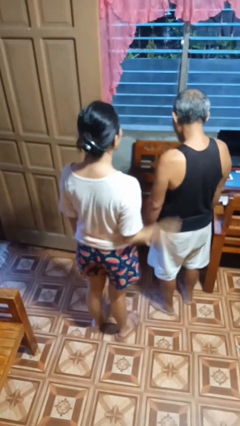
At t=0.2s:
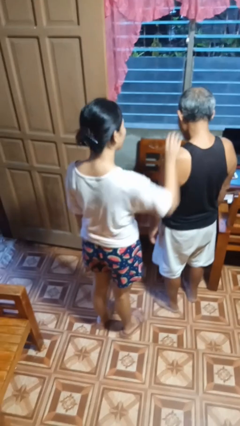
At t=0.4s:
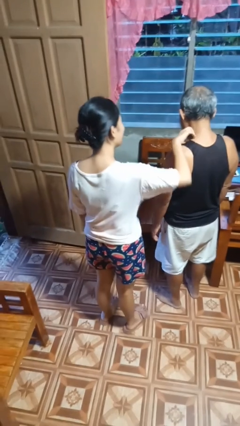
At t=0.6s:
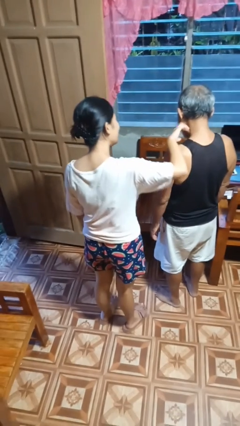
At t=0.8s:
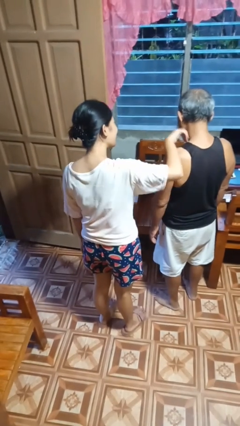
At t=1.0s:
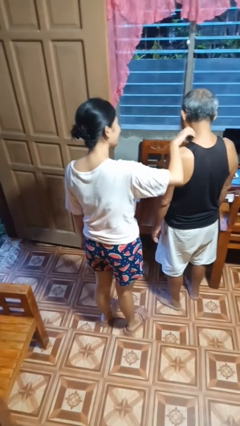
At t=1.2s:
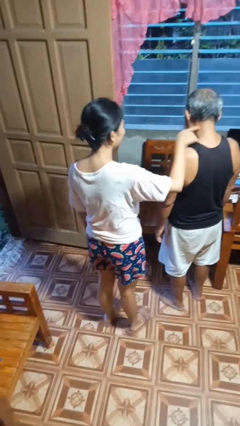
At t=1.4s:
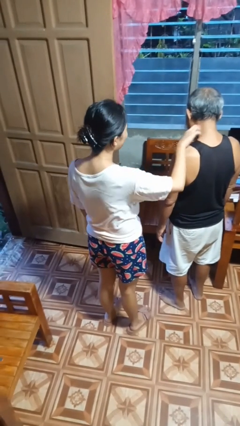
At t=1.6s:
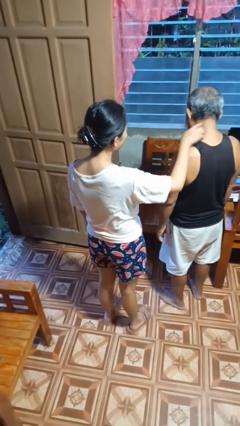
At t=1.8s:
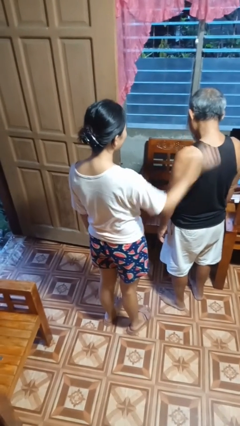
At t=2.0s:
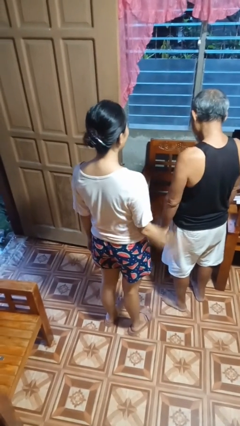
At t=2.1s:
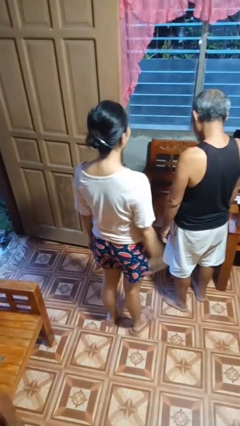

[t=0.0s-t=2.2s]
person tickles person

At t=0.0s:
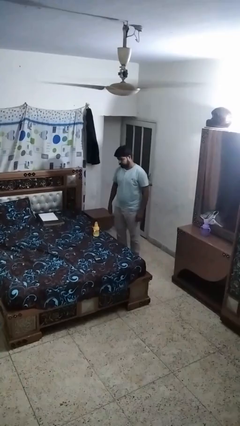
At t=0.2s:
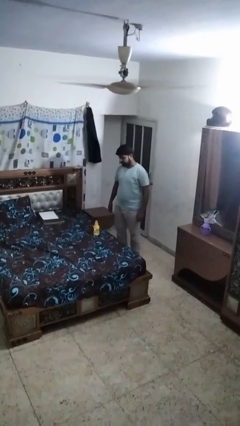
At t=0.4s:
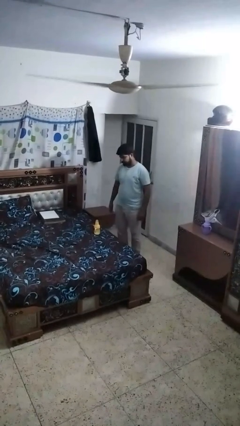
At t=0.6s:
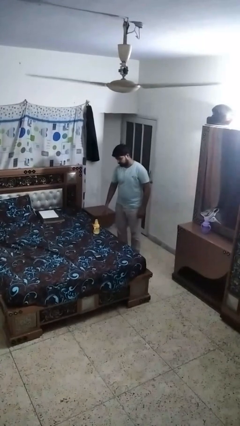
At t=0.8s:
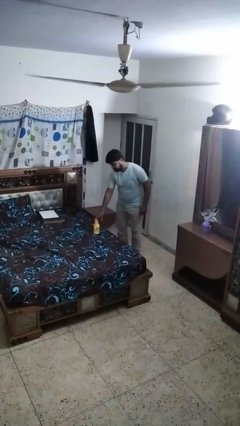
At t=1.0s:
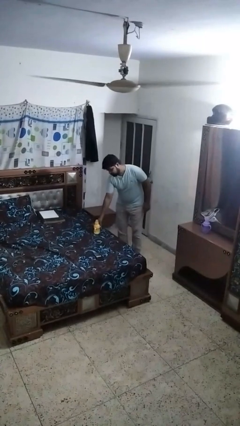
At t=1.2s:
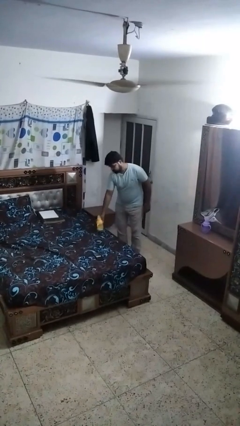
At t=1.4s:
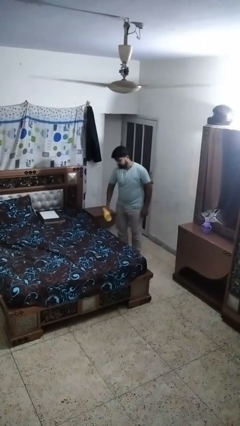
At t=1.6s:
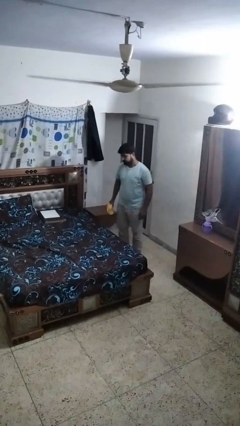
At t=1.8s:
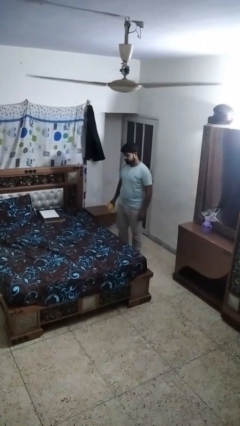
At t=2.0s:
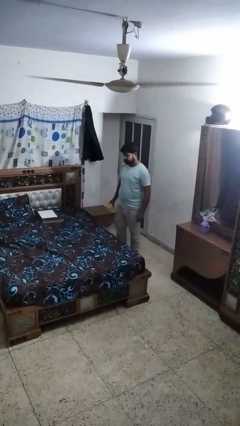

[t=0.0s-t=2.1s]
person picks up object from bed

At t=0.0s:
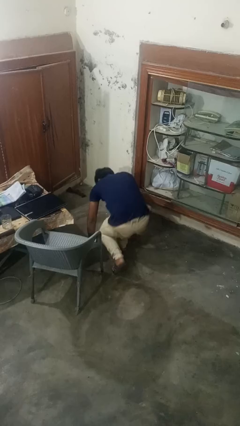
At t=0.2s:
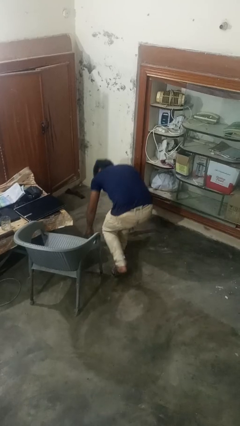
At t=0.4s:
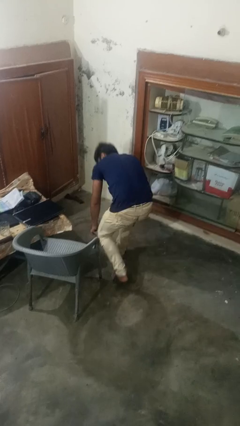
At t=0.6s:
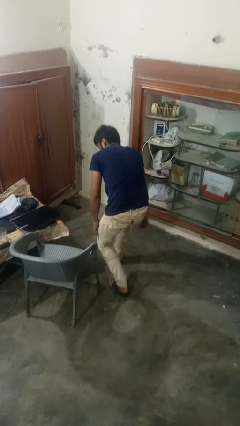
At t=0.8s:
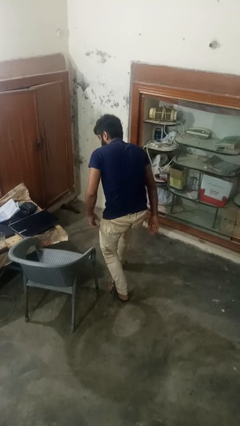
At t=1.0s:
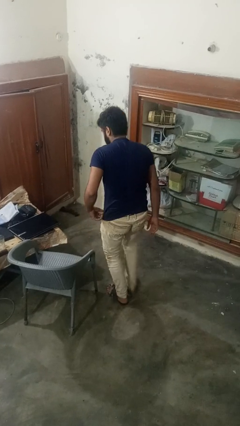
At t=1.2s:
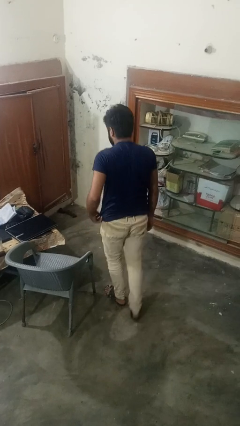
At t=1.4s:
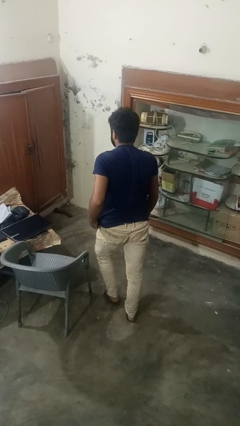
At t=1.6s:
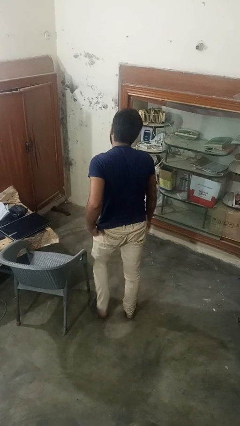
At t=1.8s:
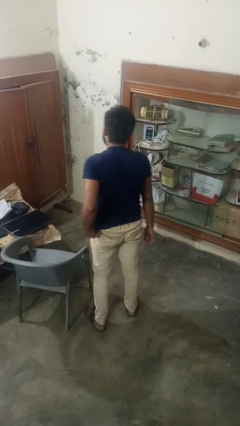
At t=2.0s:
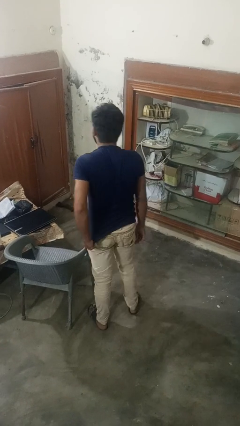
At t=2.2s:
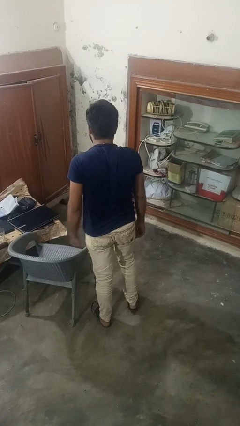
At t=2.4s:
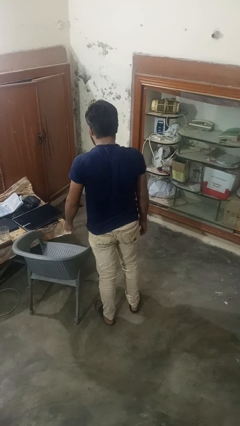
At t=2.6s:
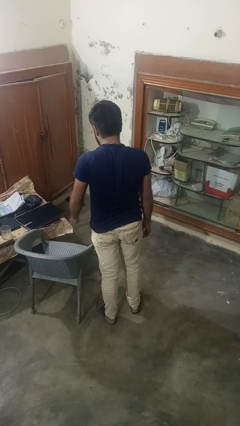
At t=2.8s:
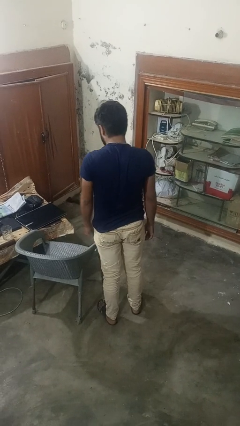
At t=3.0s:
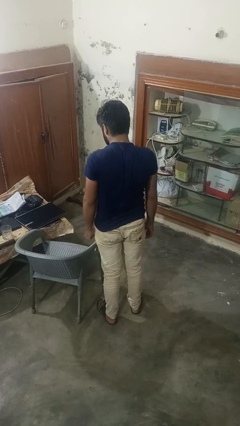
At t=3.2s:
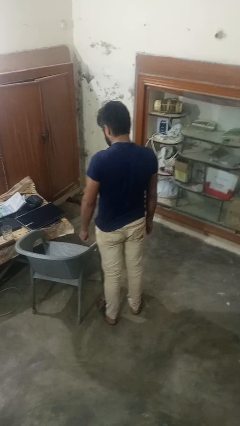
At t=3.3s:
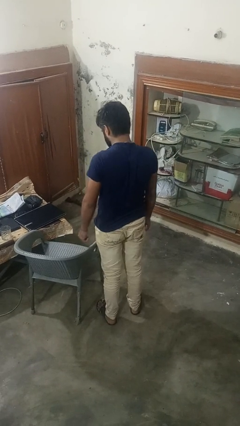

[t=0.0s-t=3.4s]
person stands up from floor

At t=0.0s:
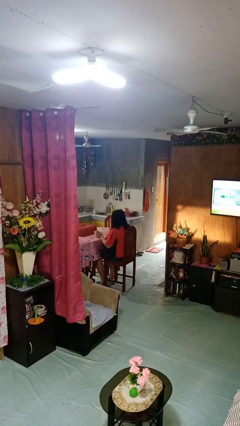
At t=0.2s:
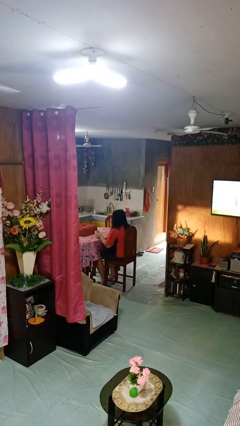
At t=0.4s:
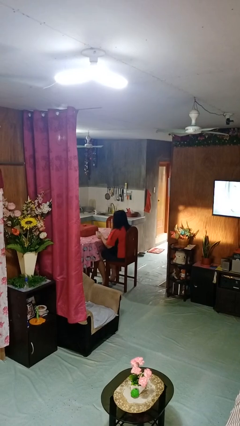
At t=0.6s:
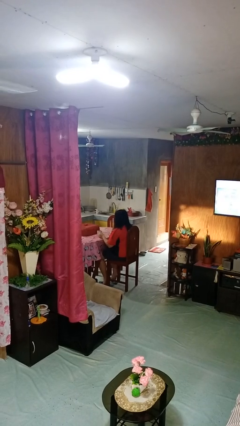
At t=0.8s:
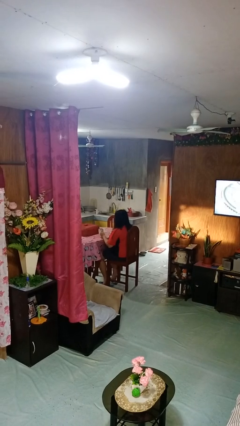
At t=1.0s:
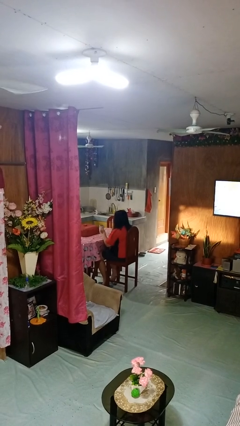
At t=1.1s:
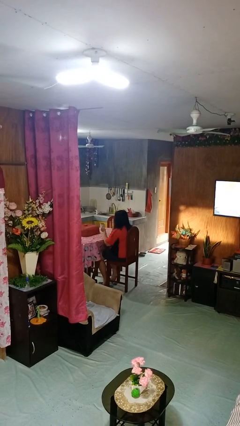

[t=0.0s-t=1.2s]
person picks up object from table

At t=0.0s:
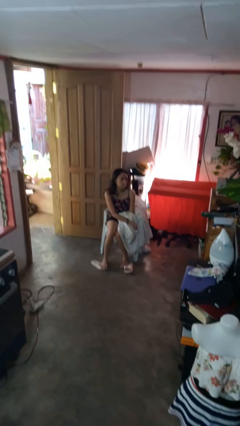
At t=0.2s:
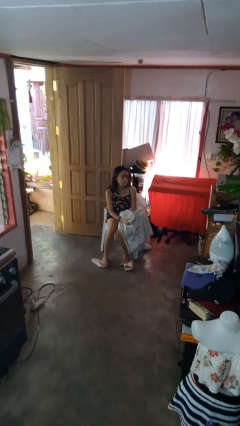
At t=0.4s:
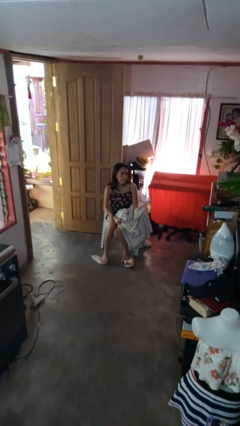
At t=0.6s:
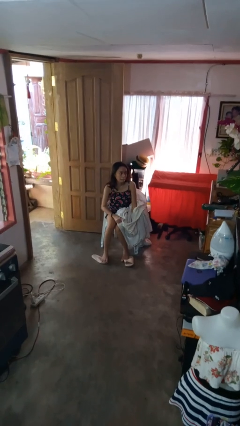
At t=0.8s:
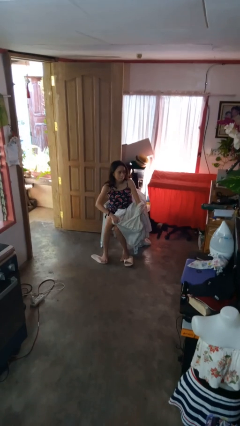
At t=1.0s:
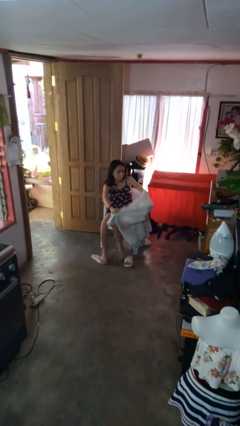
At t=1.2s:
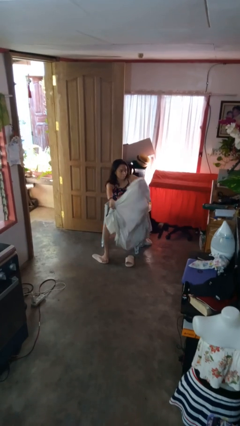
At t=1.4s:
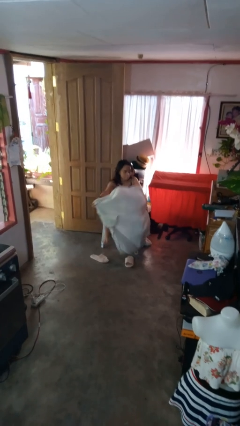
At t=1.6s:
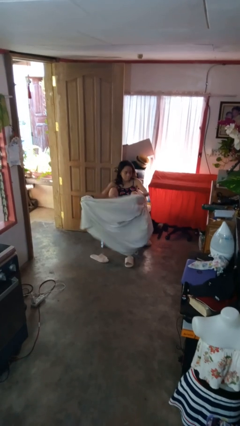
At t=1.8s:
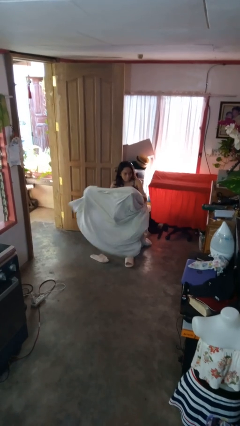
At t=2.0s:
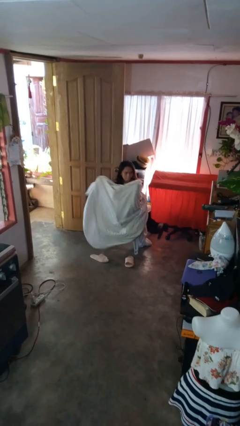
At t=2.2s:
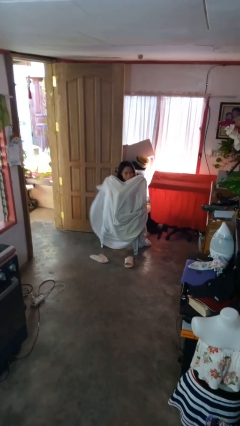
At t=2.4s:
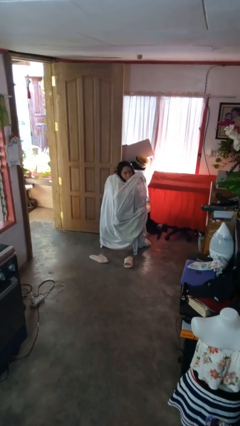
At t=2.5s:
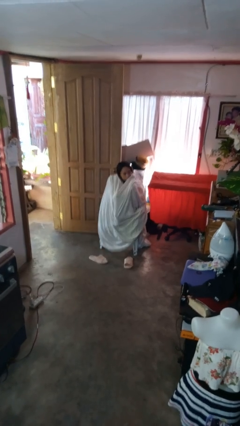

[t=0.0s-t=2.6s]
person covers with blanket

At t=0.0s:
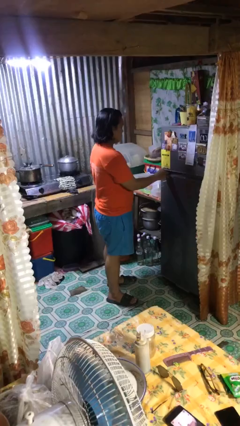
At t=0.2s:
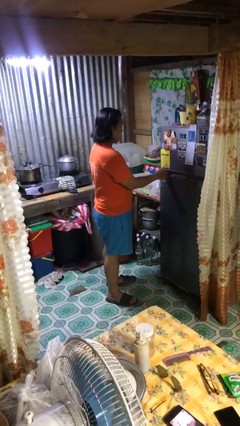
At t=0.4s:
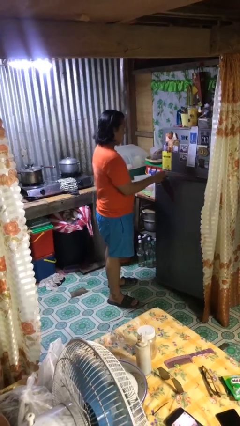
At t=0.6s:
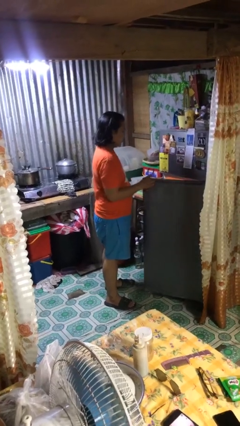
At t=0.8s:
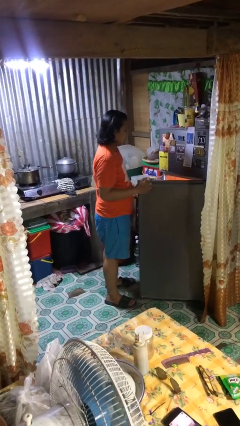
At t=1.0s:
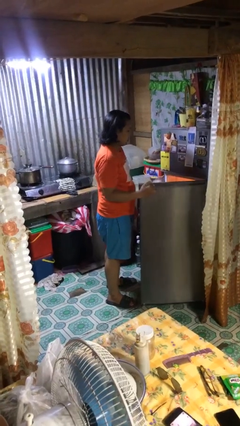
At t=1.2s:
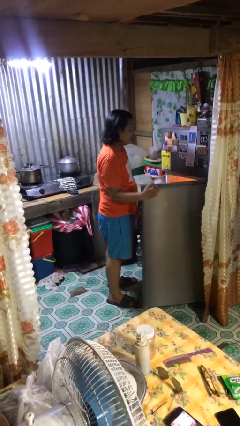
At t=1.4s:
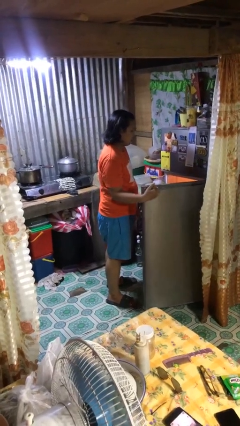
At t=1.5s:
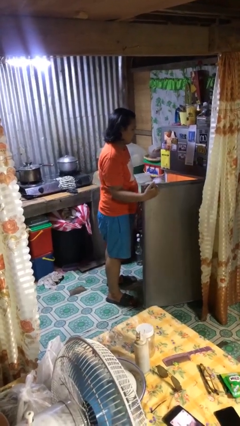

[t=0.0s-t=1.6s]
person opens refrigerator

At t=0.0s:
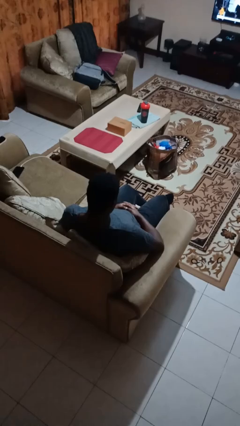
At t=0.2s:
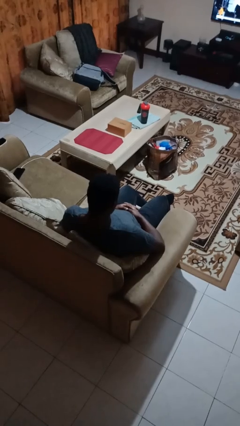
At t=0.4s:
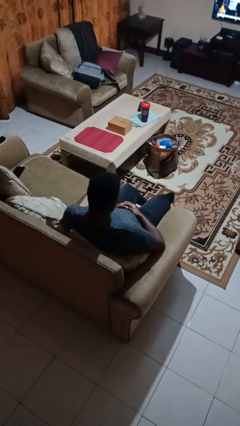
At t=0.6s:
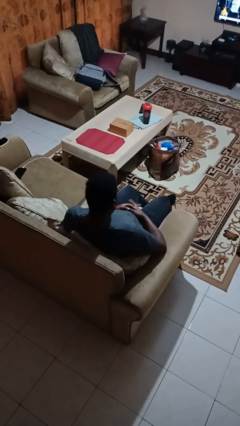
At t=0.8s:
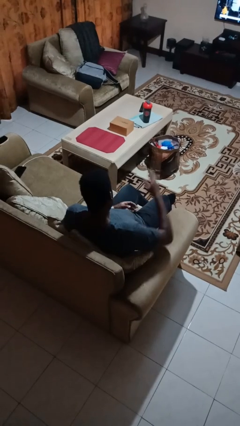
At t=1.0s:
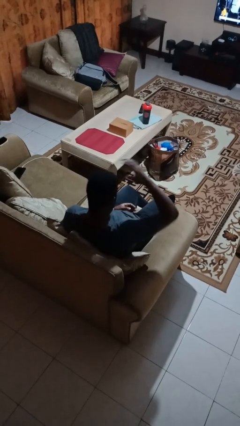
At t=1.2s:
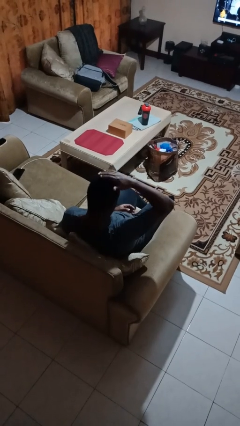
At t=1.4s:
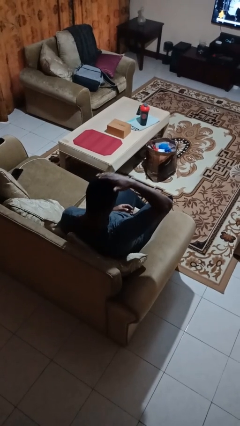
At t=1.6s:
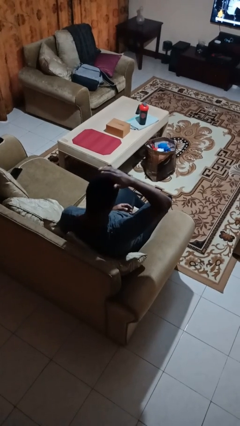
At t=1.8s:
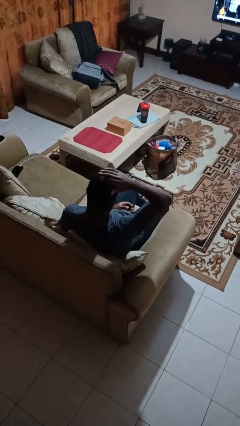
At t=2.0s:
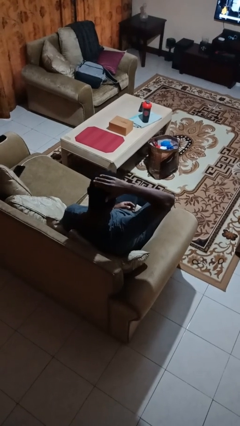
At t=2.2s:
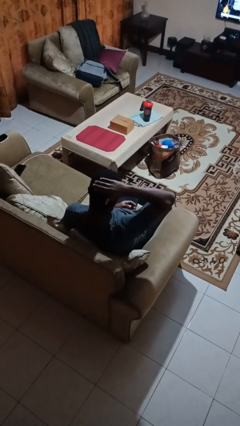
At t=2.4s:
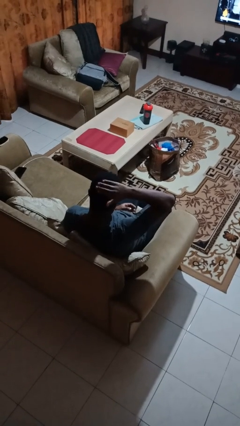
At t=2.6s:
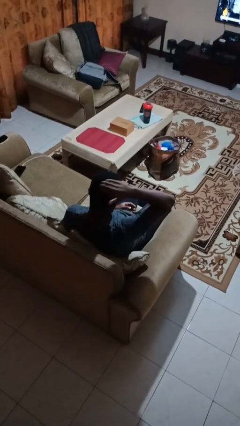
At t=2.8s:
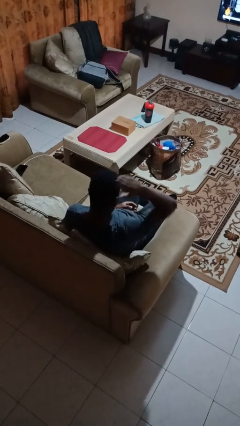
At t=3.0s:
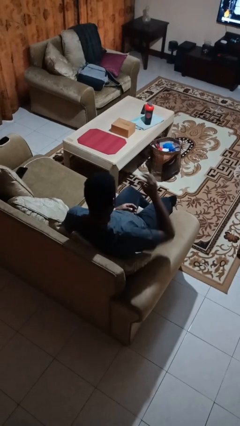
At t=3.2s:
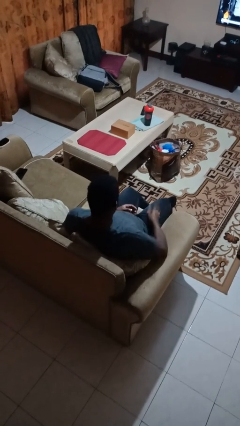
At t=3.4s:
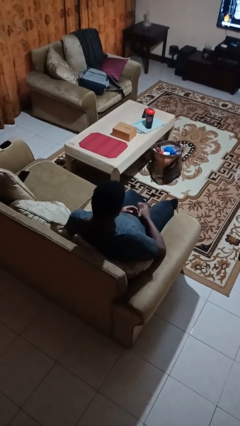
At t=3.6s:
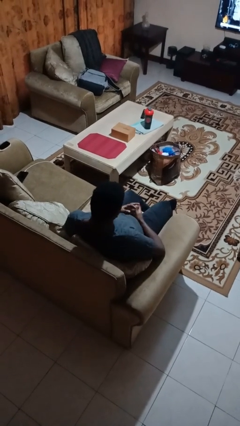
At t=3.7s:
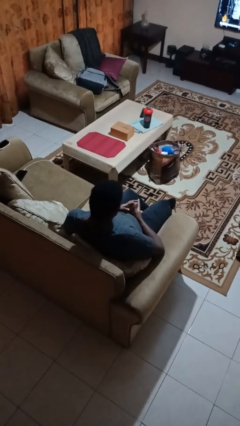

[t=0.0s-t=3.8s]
person pats head
